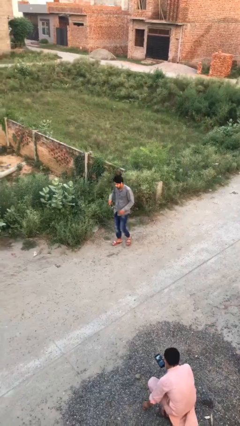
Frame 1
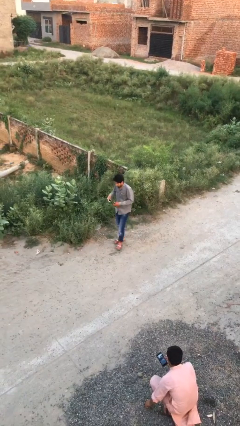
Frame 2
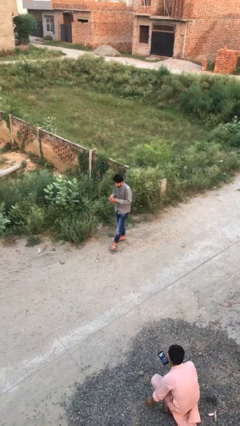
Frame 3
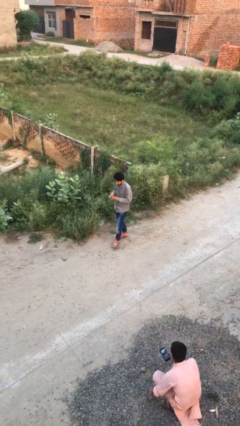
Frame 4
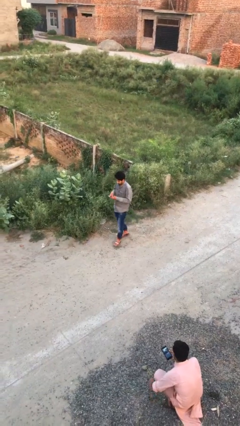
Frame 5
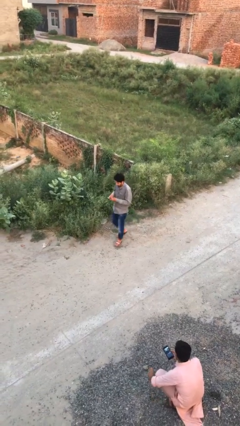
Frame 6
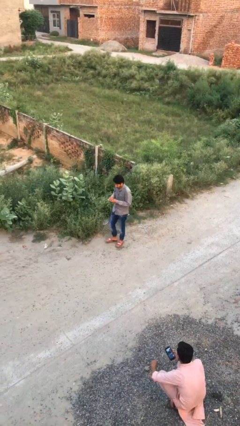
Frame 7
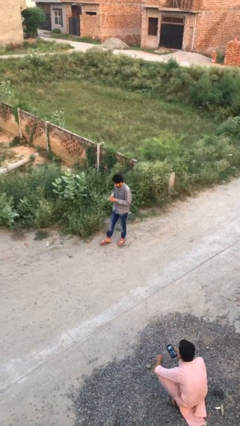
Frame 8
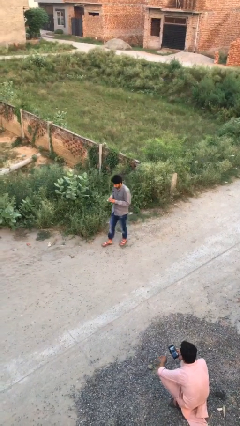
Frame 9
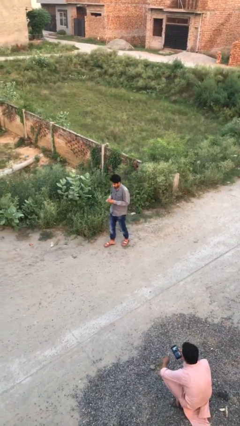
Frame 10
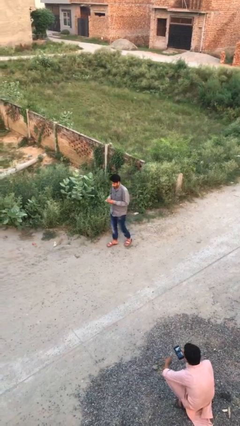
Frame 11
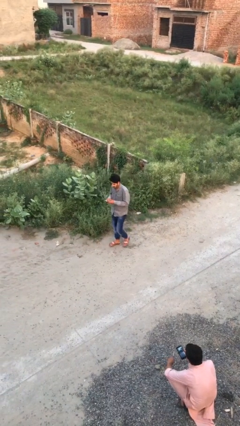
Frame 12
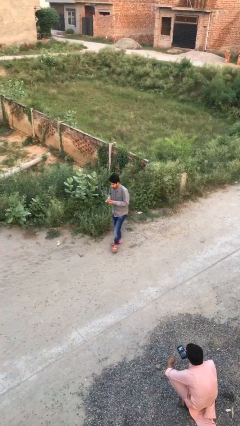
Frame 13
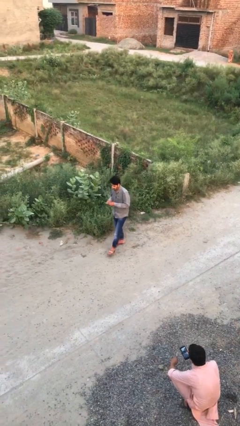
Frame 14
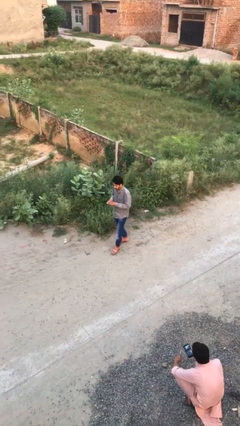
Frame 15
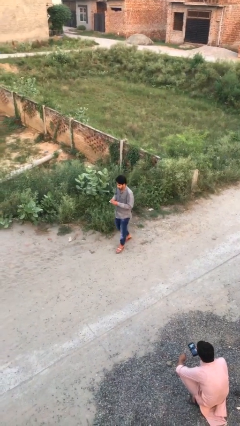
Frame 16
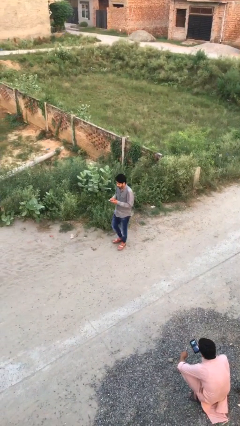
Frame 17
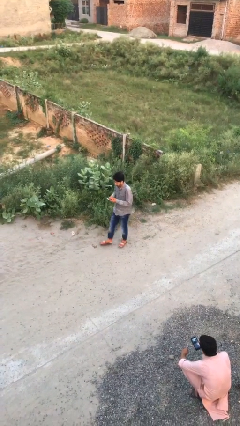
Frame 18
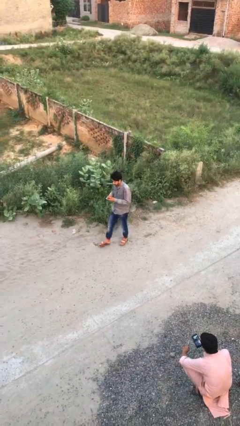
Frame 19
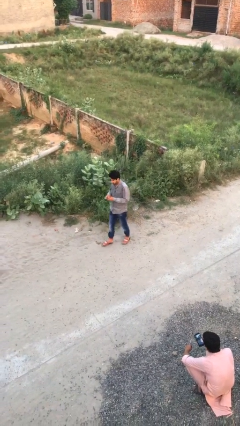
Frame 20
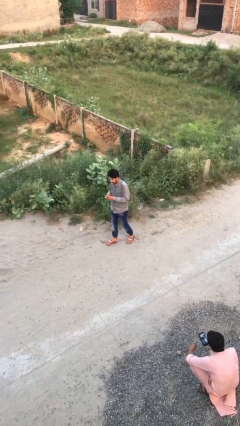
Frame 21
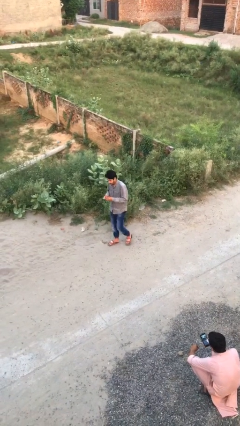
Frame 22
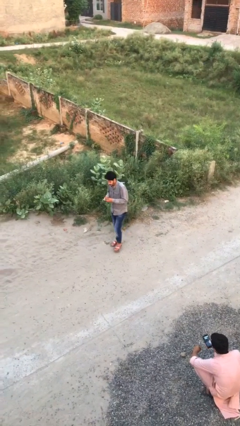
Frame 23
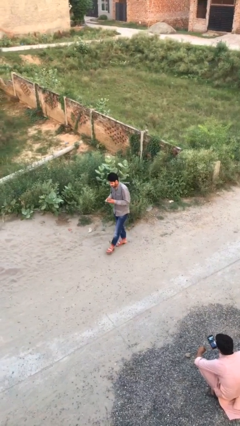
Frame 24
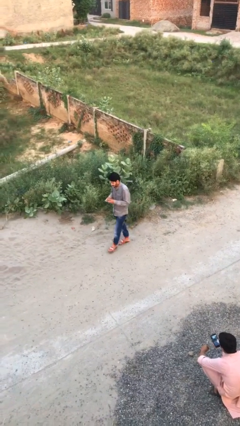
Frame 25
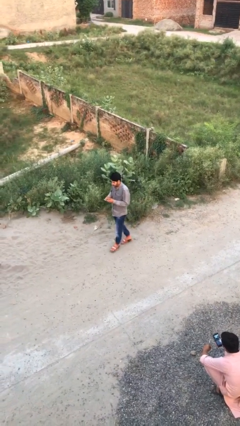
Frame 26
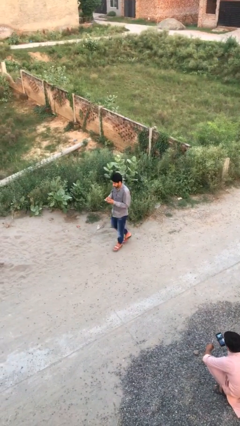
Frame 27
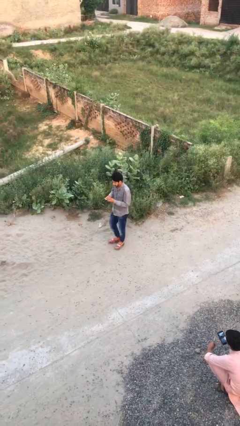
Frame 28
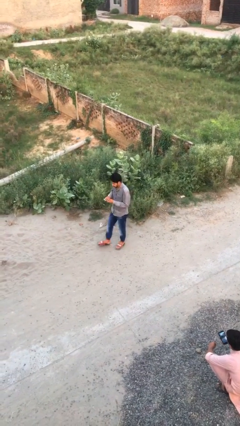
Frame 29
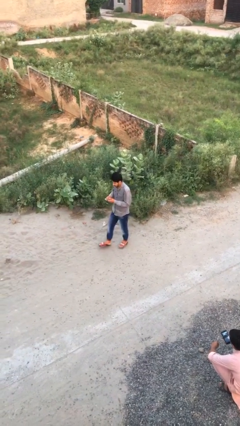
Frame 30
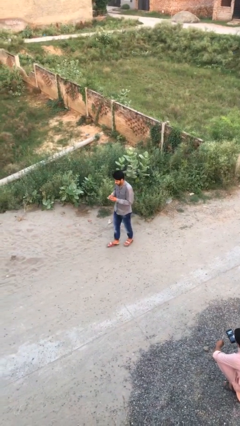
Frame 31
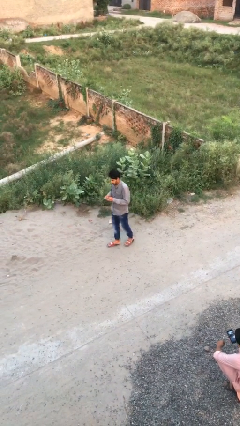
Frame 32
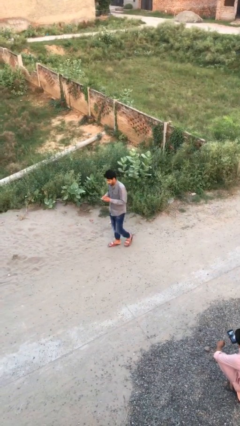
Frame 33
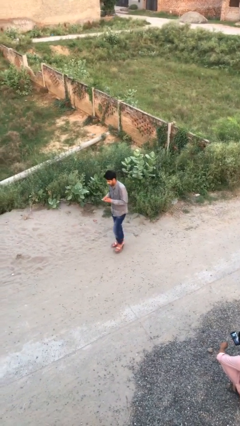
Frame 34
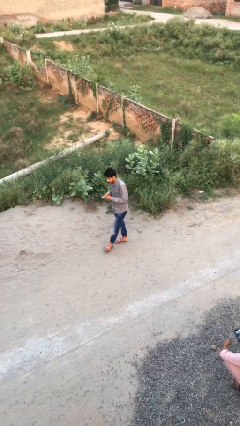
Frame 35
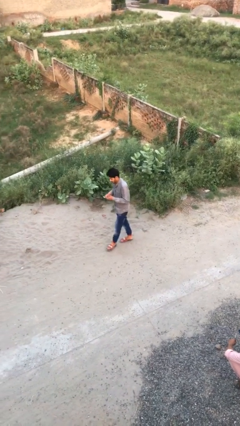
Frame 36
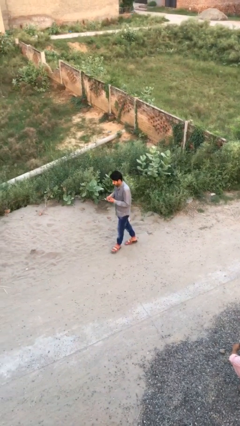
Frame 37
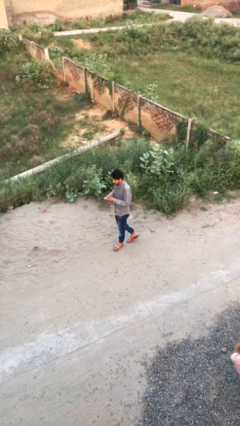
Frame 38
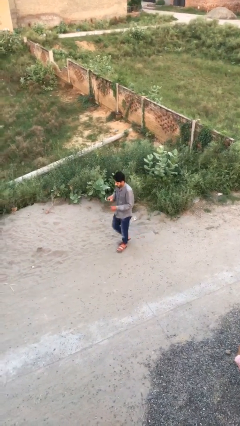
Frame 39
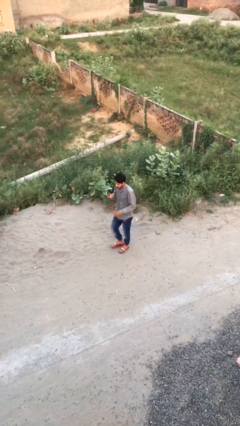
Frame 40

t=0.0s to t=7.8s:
person texts on phone

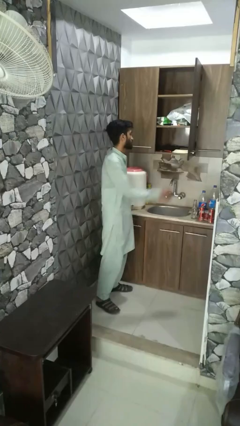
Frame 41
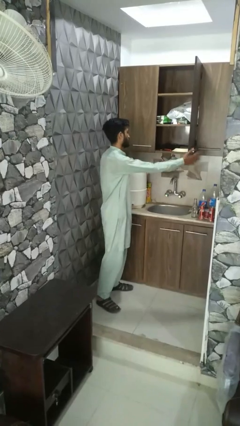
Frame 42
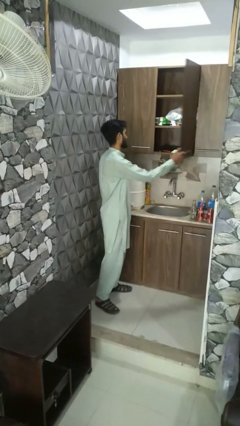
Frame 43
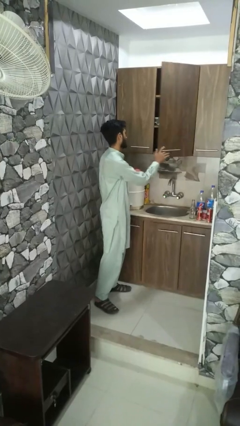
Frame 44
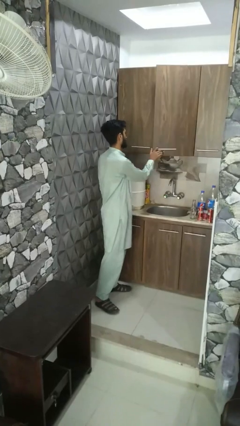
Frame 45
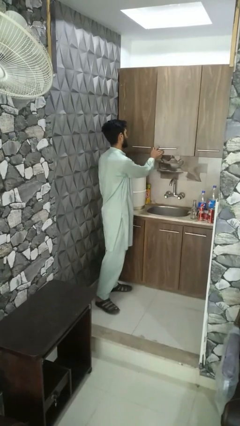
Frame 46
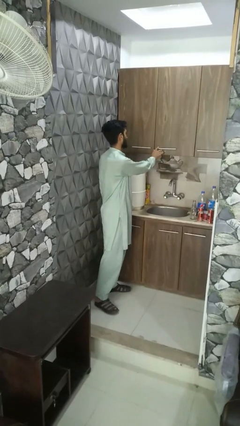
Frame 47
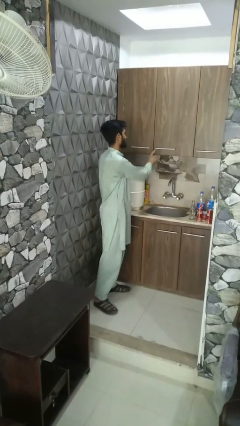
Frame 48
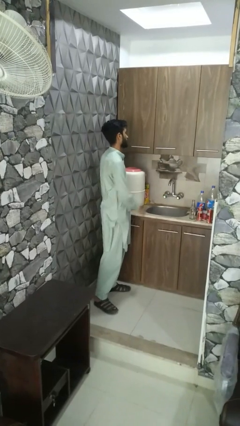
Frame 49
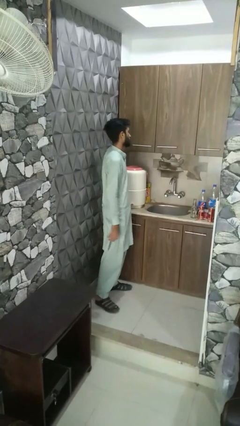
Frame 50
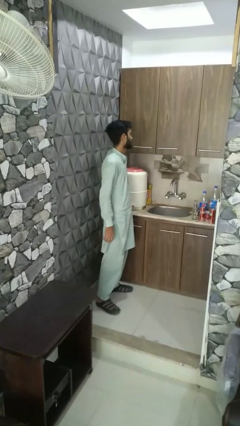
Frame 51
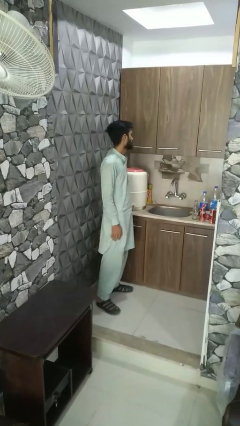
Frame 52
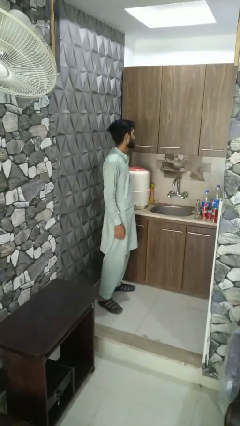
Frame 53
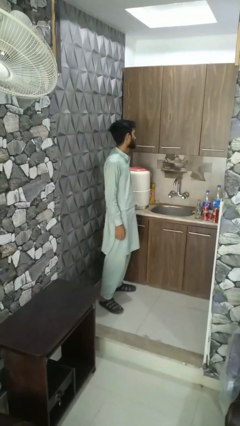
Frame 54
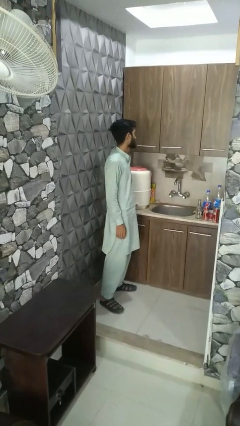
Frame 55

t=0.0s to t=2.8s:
person closes cabinet

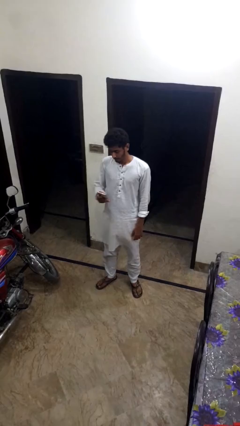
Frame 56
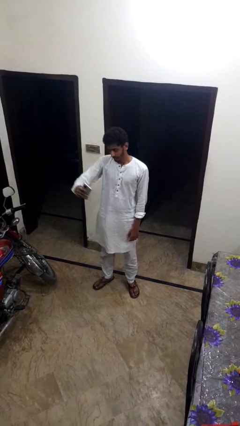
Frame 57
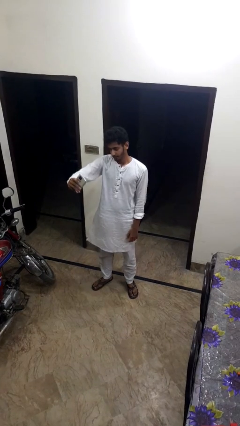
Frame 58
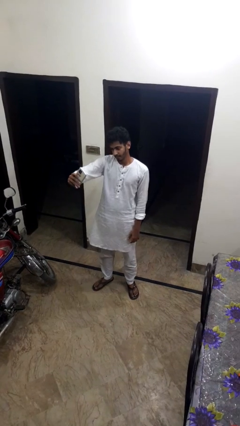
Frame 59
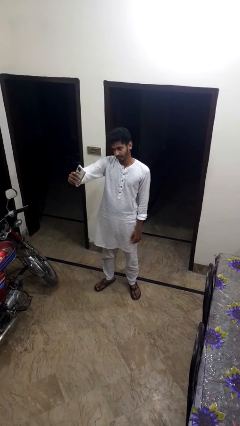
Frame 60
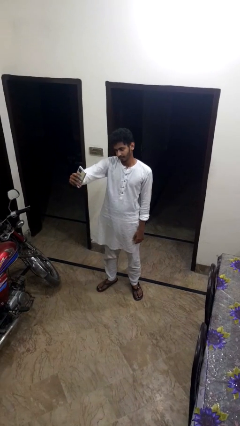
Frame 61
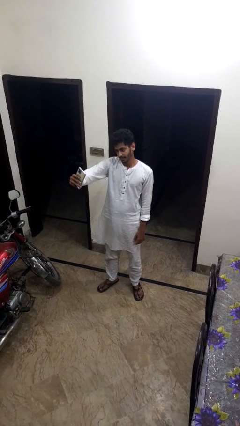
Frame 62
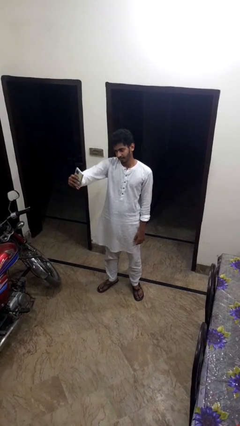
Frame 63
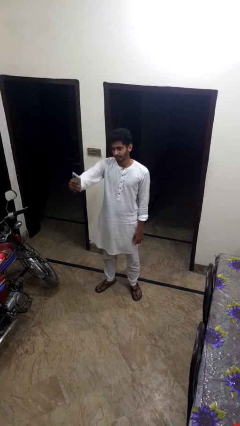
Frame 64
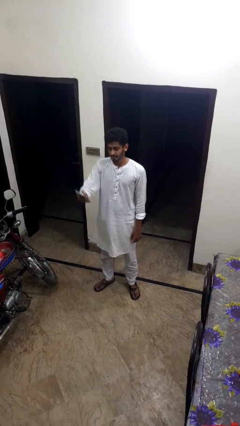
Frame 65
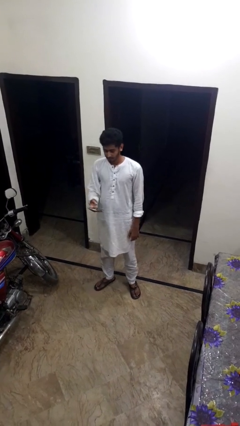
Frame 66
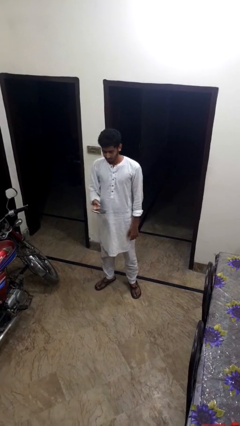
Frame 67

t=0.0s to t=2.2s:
person takes selfie

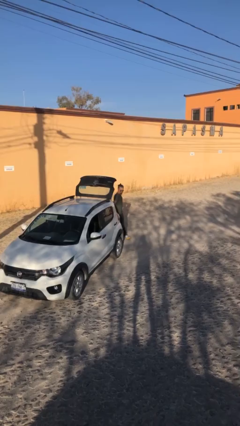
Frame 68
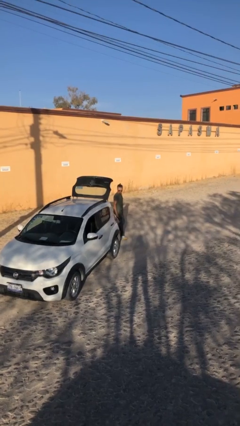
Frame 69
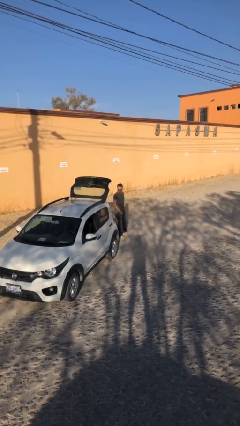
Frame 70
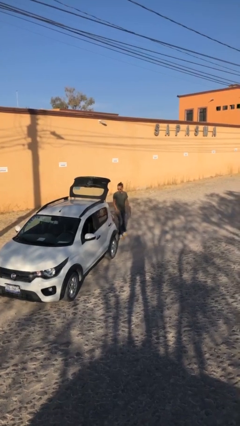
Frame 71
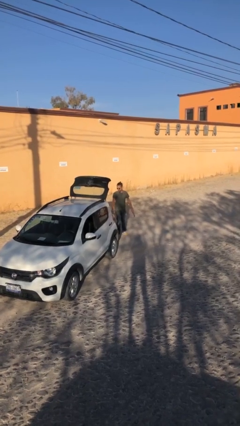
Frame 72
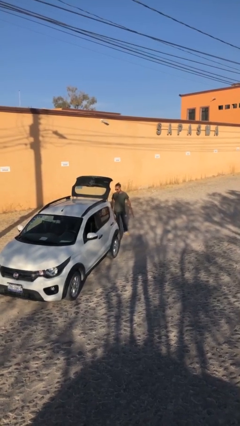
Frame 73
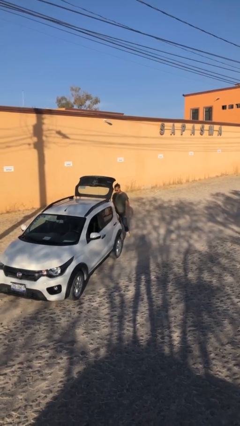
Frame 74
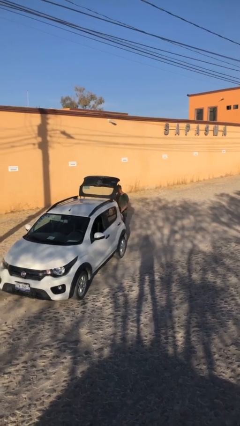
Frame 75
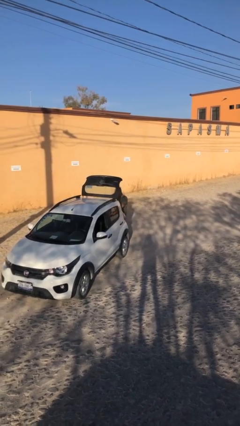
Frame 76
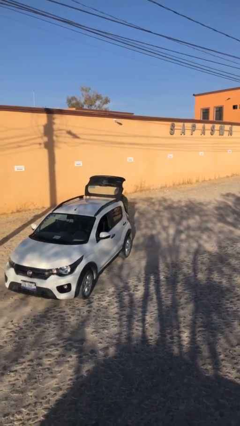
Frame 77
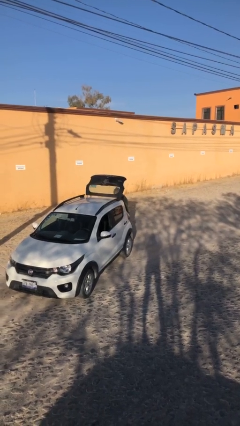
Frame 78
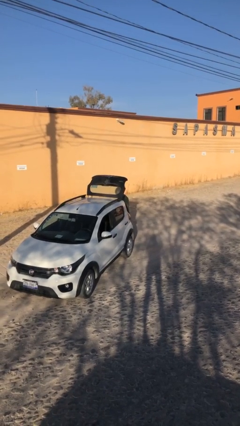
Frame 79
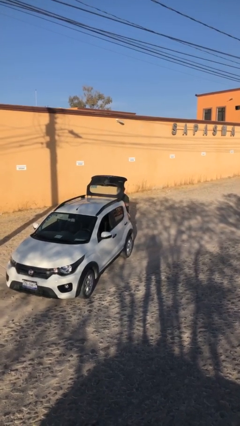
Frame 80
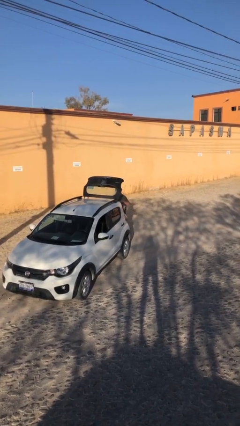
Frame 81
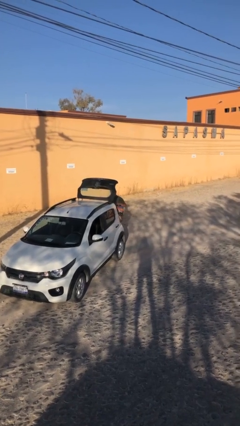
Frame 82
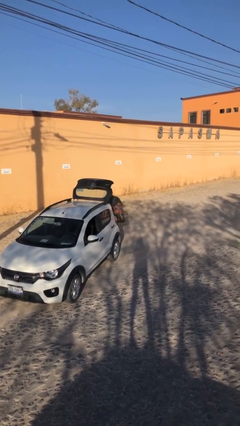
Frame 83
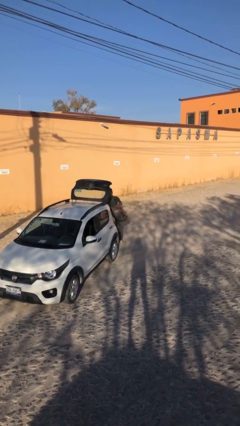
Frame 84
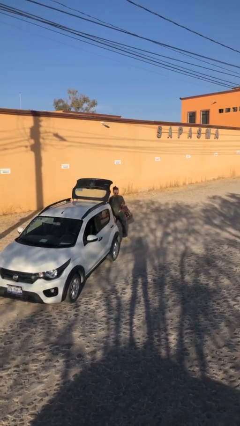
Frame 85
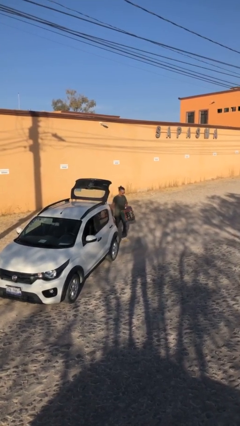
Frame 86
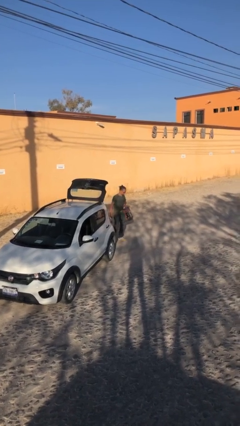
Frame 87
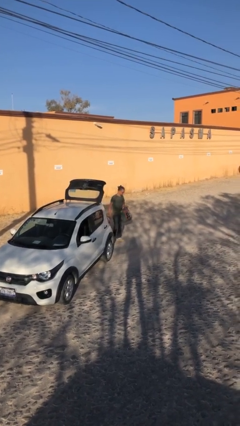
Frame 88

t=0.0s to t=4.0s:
person unloads car

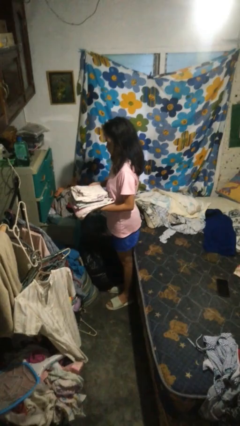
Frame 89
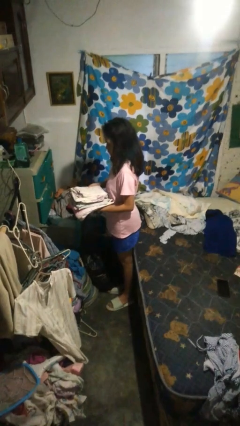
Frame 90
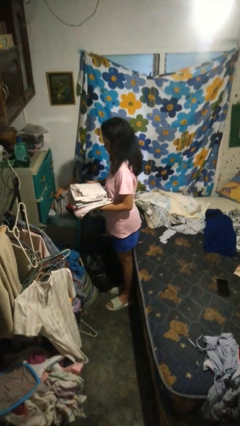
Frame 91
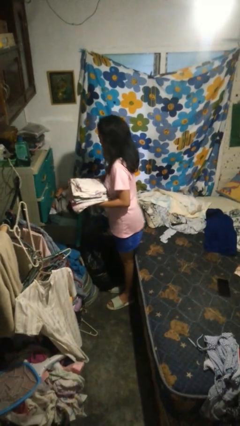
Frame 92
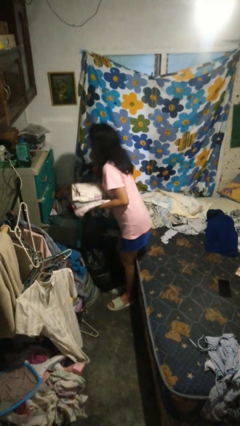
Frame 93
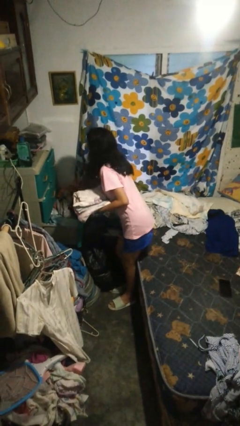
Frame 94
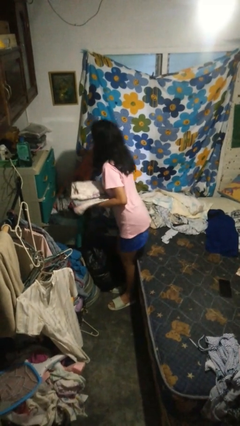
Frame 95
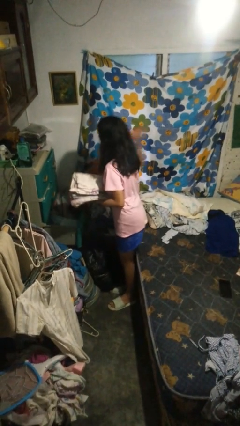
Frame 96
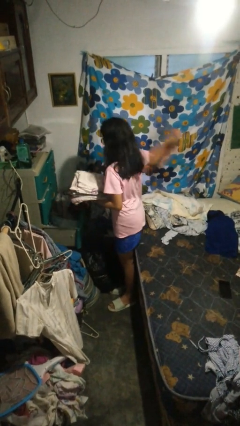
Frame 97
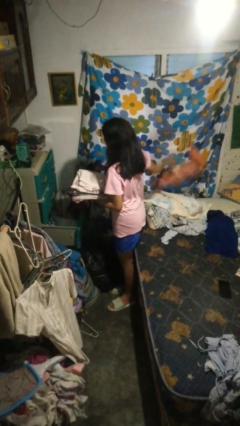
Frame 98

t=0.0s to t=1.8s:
person takes clothes from dresser
